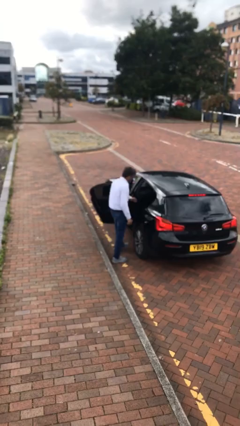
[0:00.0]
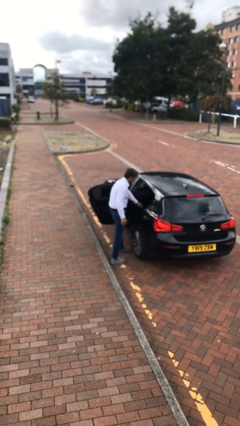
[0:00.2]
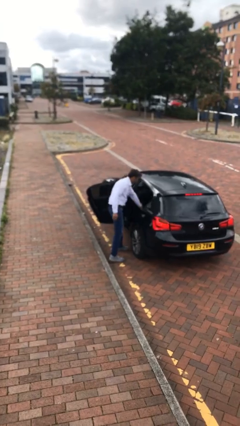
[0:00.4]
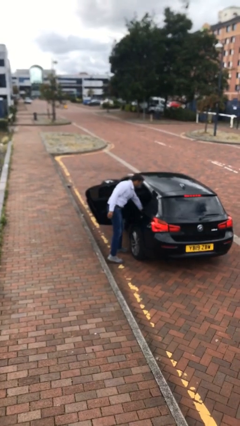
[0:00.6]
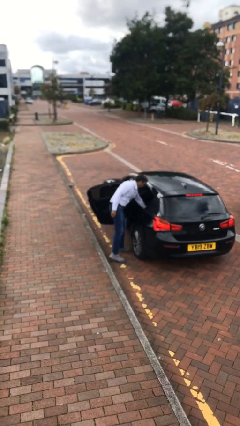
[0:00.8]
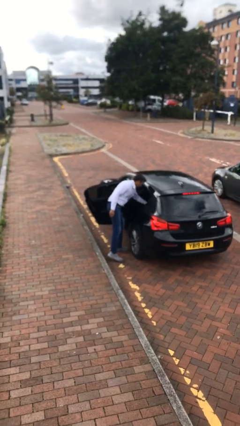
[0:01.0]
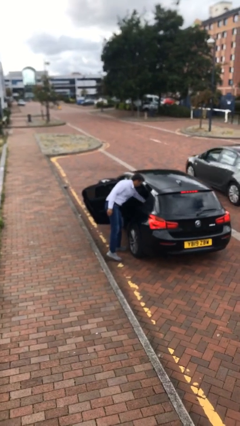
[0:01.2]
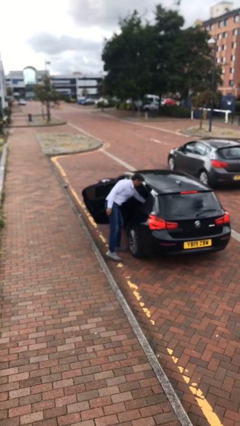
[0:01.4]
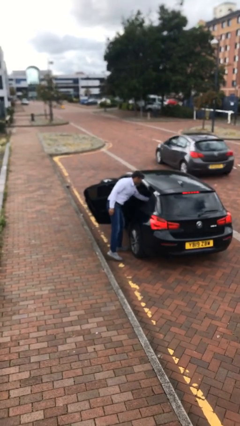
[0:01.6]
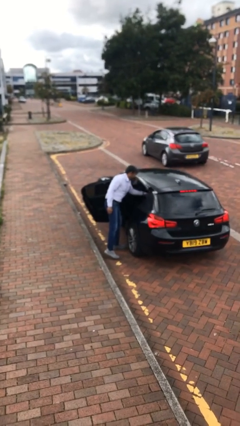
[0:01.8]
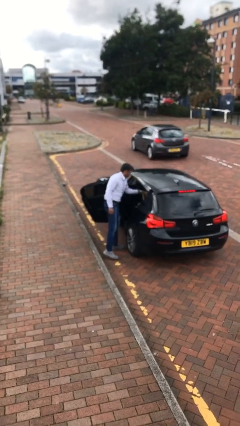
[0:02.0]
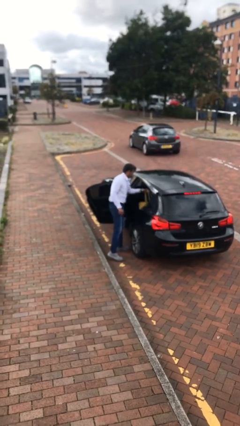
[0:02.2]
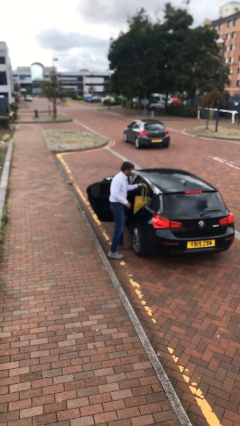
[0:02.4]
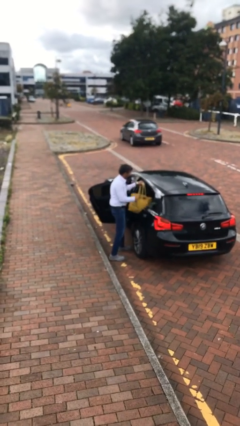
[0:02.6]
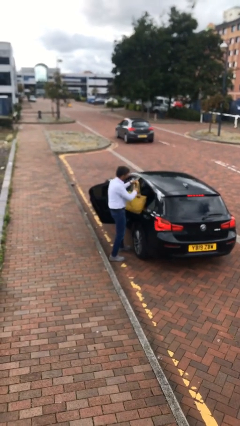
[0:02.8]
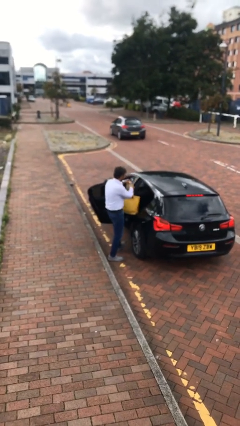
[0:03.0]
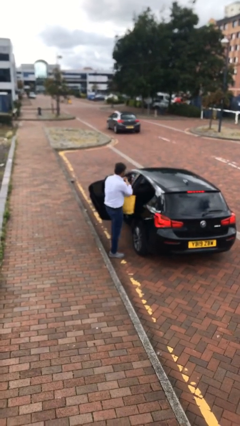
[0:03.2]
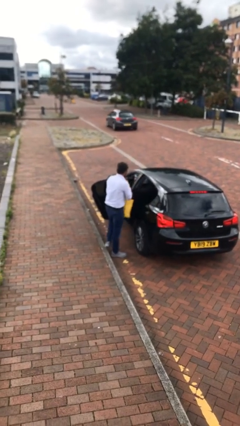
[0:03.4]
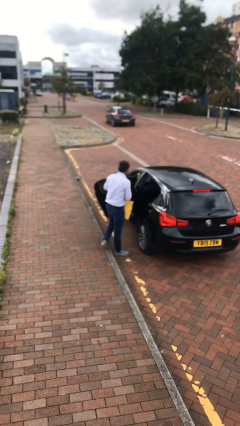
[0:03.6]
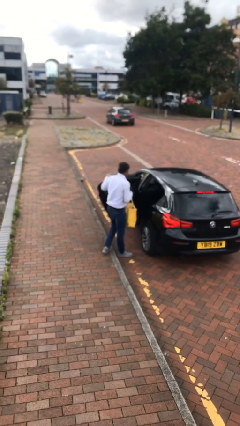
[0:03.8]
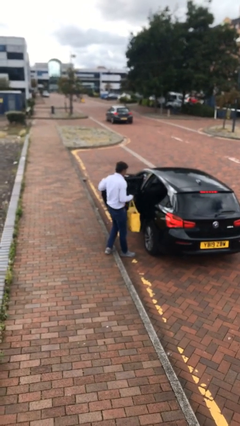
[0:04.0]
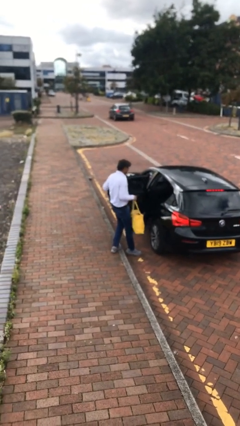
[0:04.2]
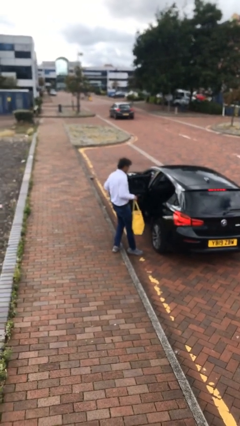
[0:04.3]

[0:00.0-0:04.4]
person unloads car

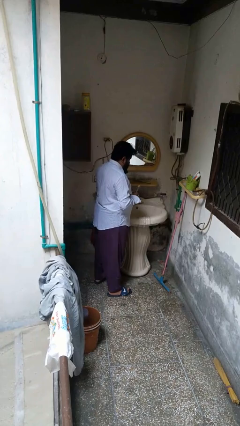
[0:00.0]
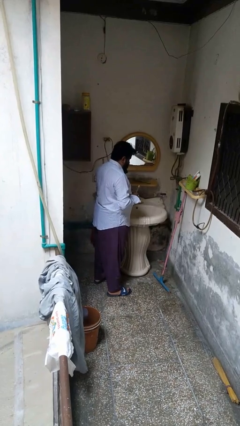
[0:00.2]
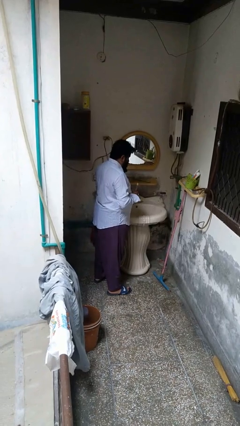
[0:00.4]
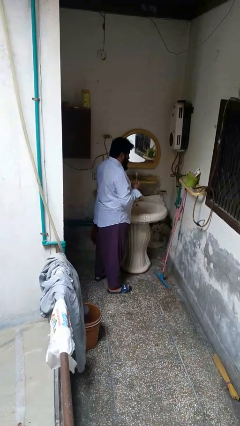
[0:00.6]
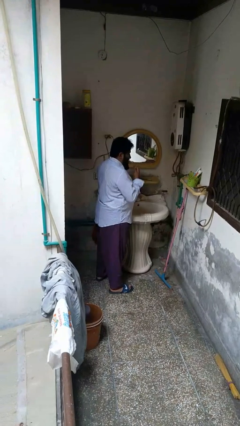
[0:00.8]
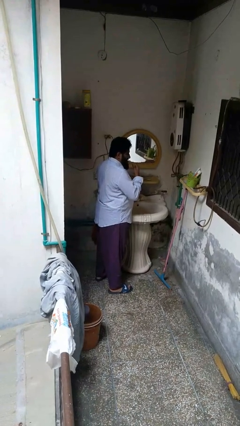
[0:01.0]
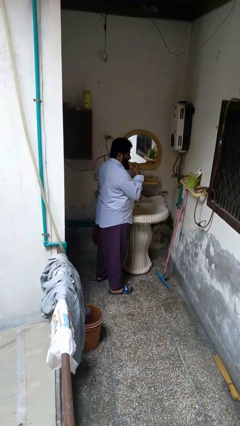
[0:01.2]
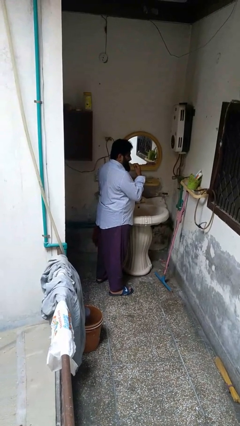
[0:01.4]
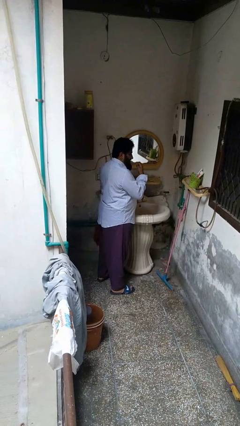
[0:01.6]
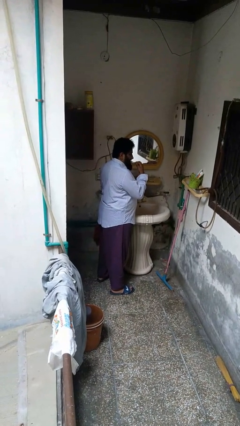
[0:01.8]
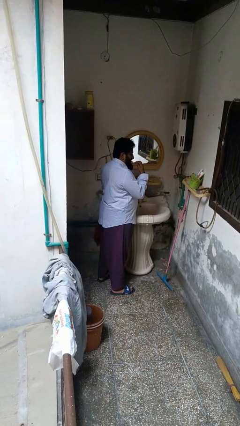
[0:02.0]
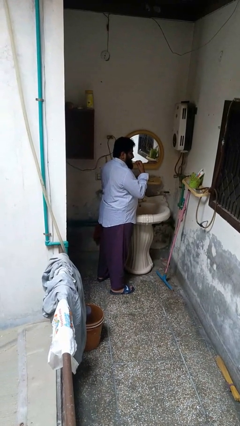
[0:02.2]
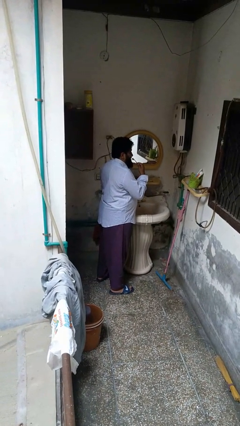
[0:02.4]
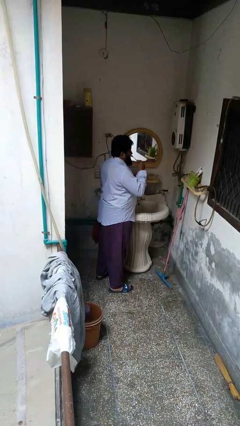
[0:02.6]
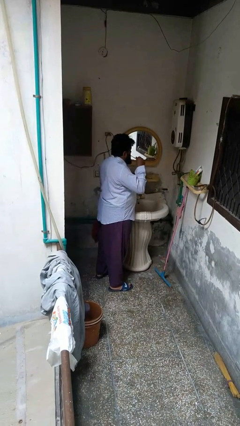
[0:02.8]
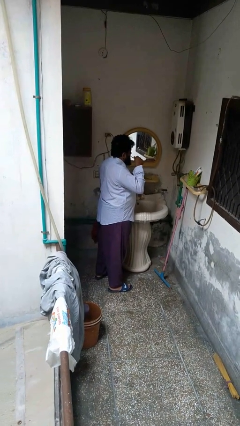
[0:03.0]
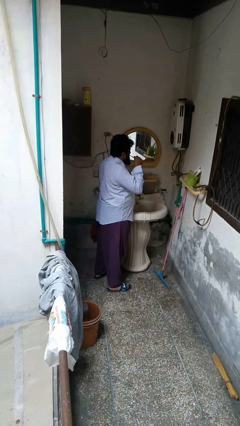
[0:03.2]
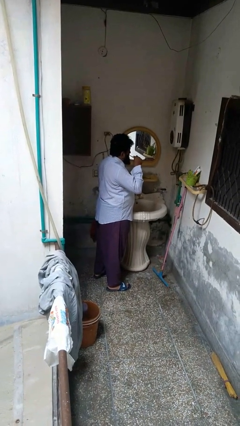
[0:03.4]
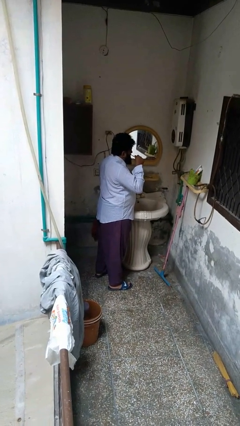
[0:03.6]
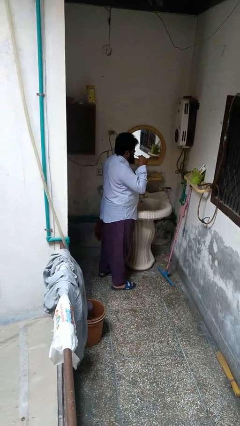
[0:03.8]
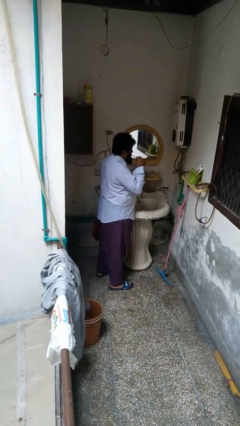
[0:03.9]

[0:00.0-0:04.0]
person brushes teeth

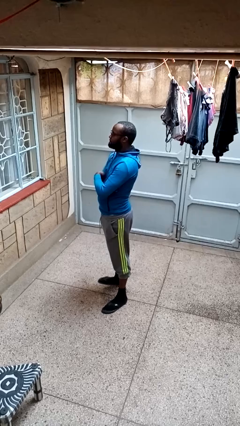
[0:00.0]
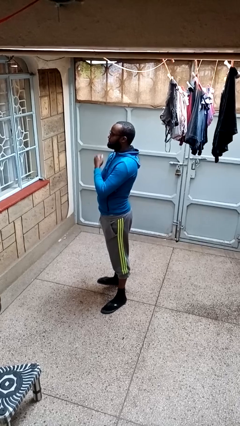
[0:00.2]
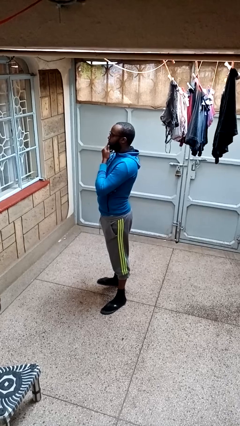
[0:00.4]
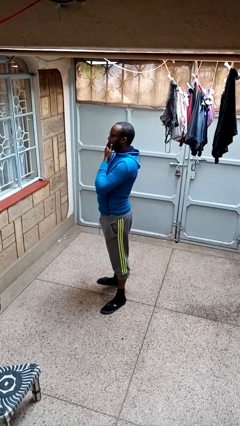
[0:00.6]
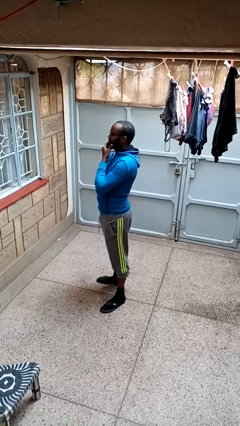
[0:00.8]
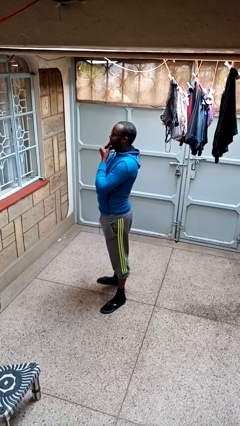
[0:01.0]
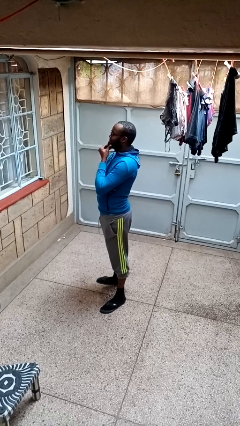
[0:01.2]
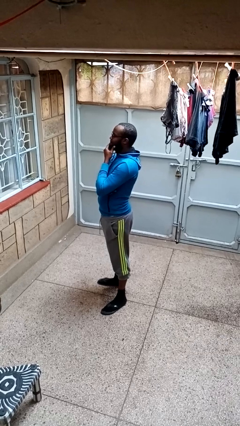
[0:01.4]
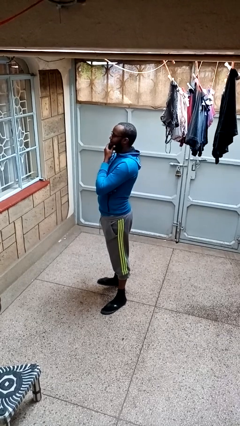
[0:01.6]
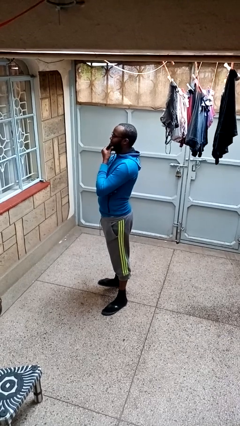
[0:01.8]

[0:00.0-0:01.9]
person strokes chin

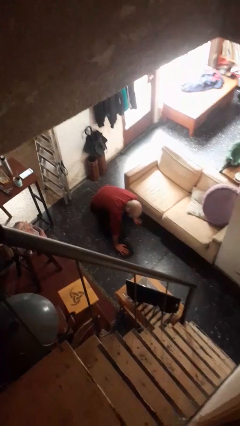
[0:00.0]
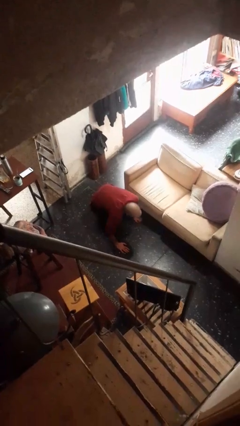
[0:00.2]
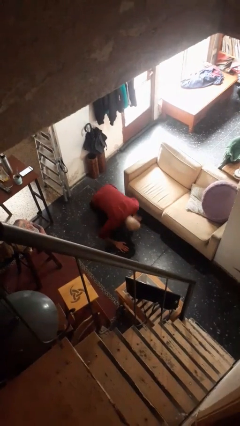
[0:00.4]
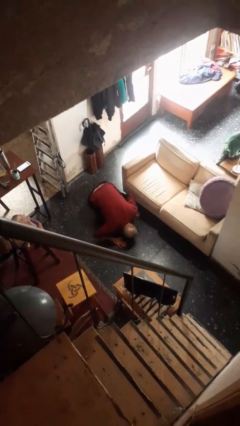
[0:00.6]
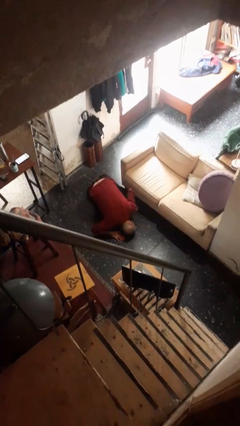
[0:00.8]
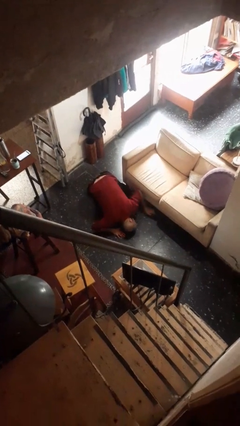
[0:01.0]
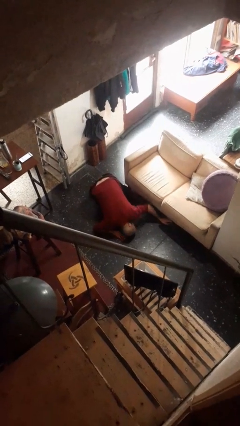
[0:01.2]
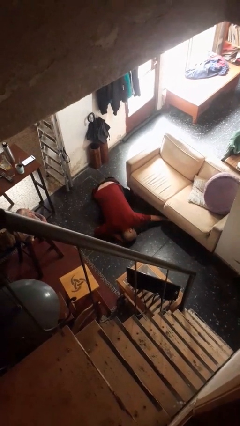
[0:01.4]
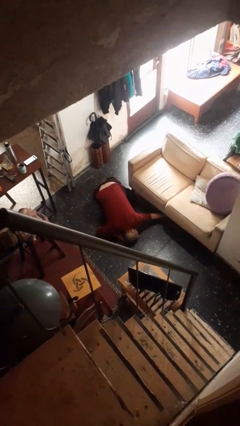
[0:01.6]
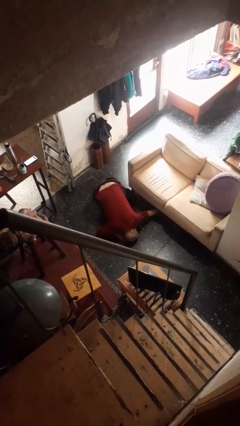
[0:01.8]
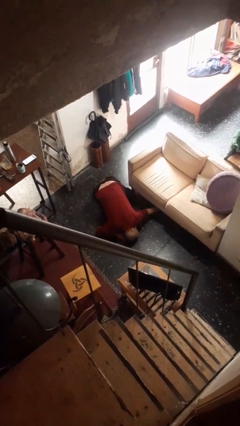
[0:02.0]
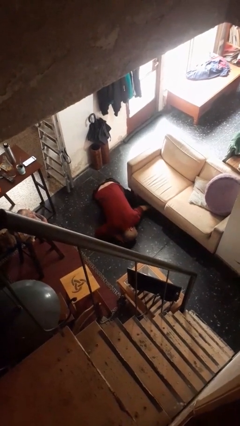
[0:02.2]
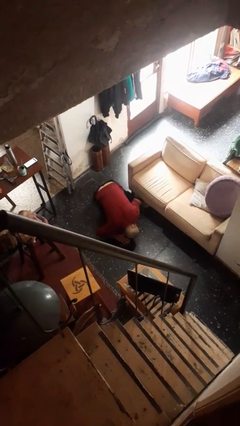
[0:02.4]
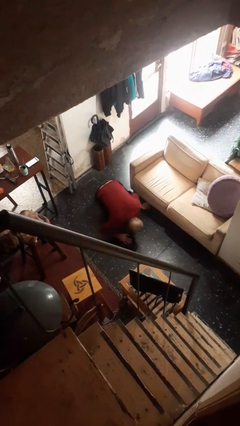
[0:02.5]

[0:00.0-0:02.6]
person searches under couch

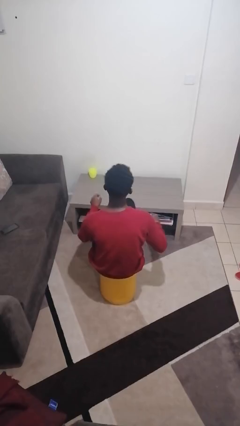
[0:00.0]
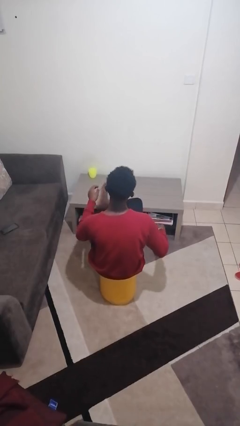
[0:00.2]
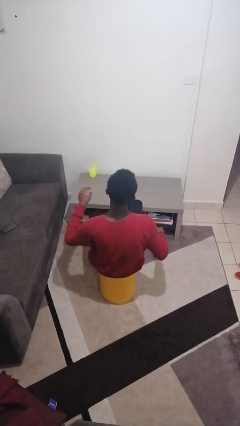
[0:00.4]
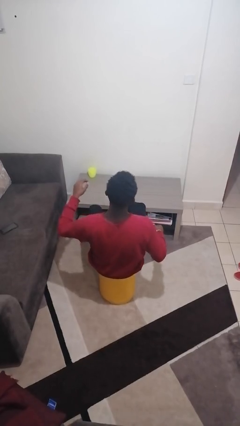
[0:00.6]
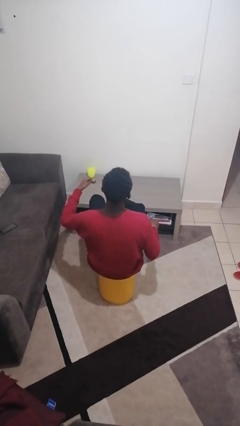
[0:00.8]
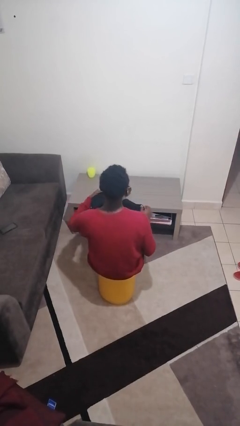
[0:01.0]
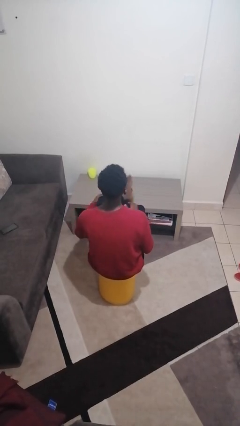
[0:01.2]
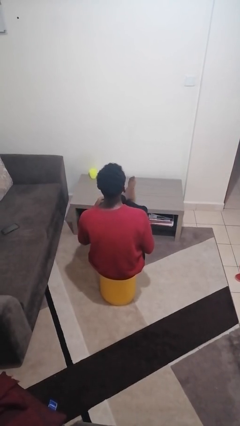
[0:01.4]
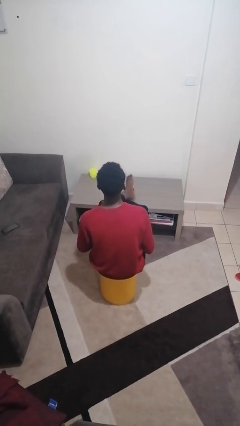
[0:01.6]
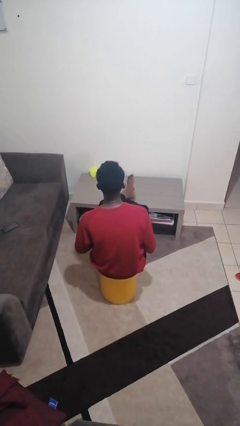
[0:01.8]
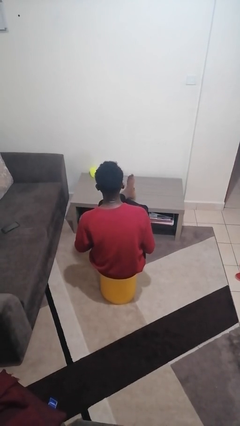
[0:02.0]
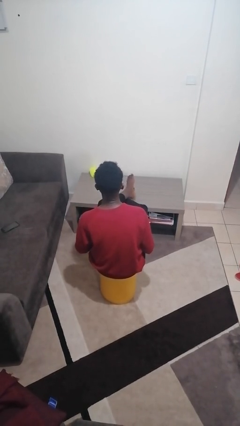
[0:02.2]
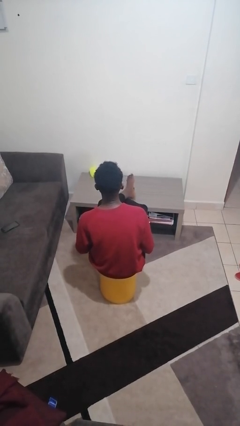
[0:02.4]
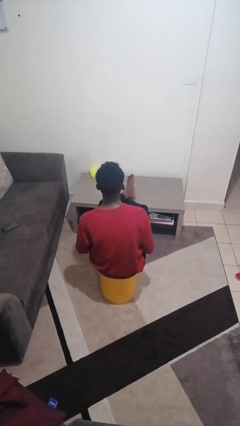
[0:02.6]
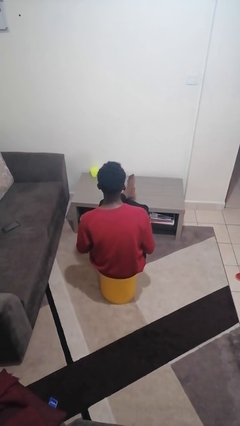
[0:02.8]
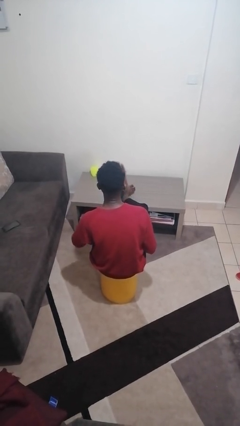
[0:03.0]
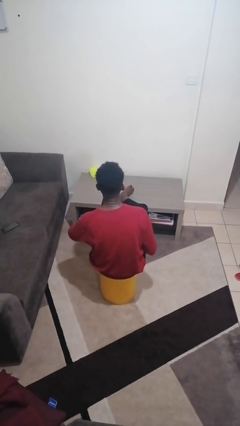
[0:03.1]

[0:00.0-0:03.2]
person puts feet up

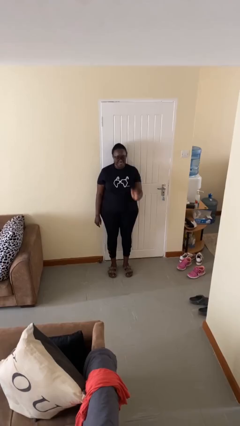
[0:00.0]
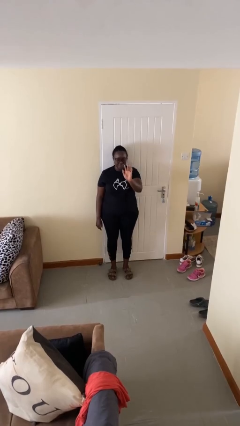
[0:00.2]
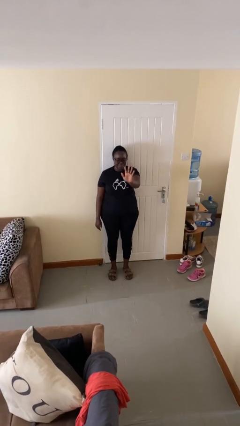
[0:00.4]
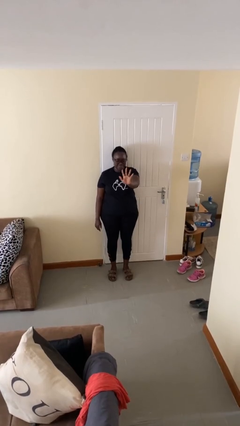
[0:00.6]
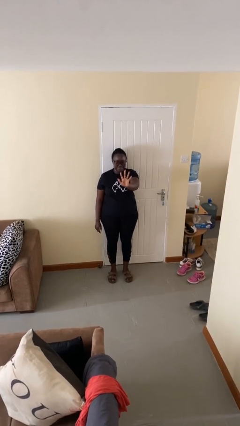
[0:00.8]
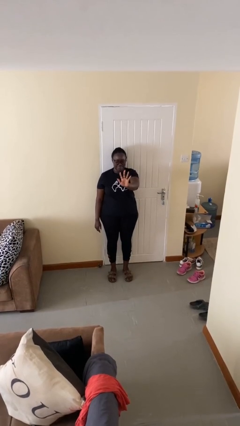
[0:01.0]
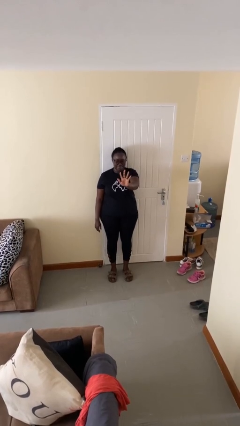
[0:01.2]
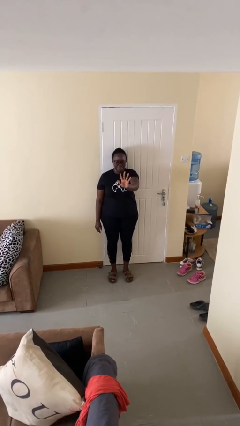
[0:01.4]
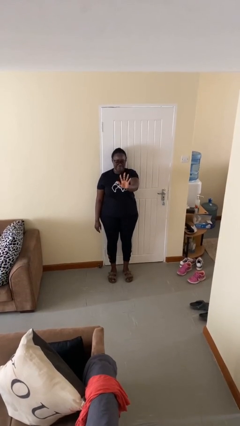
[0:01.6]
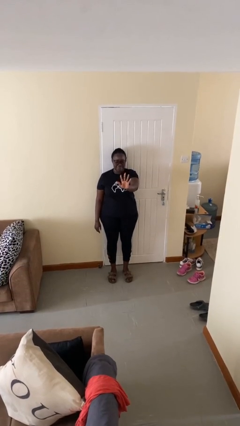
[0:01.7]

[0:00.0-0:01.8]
person gestures number five
